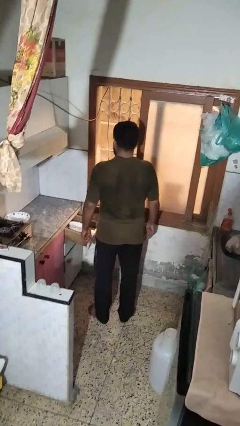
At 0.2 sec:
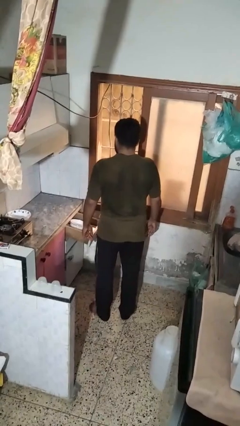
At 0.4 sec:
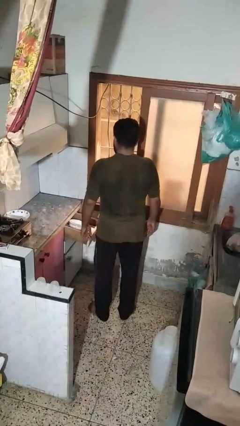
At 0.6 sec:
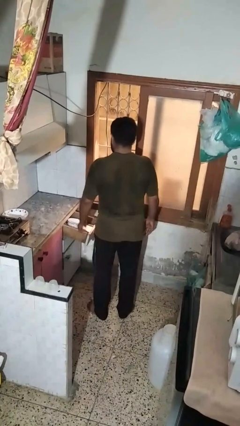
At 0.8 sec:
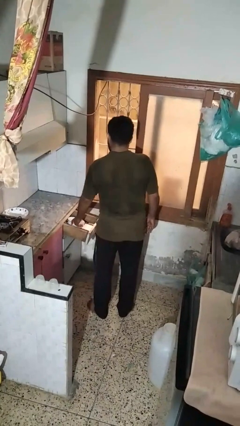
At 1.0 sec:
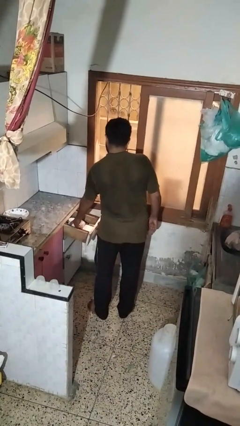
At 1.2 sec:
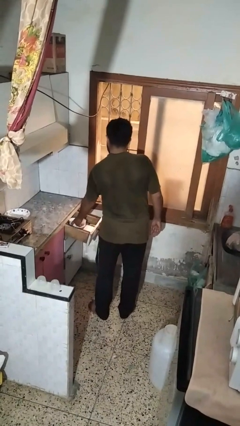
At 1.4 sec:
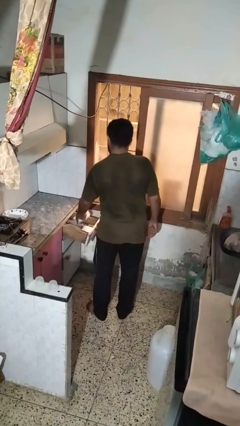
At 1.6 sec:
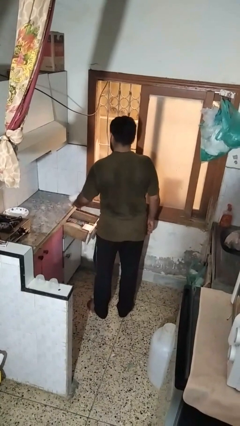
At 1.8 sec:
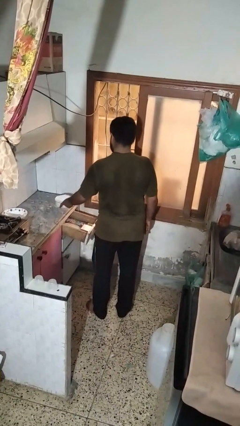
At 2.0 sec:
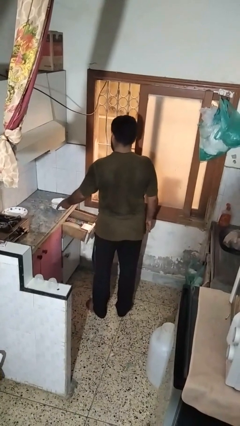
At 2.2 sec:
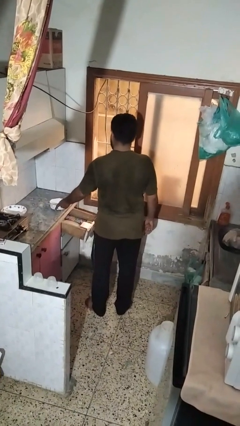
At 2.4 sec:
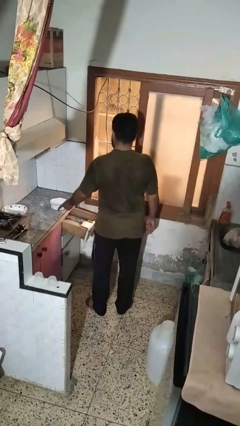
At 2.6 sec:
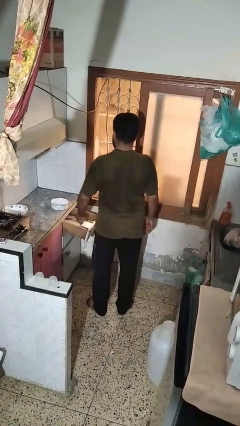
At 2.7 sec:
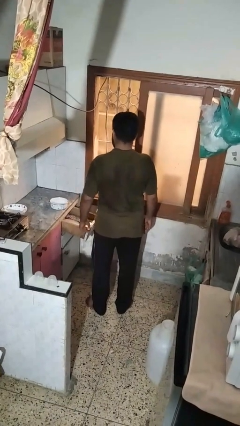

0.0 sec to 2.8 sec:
person takes object from kitchen drawer

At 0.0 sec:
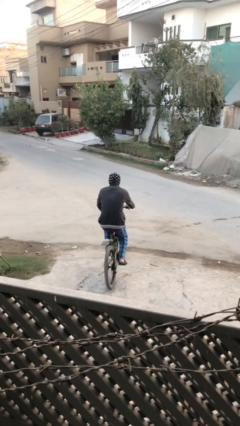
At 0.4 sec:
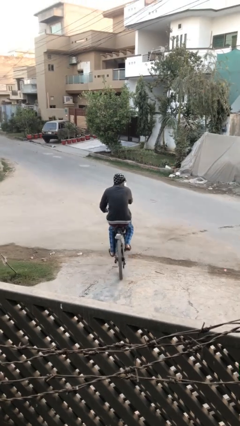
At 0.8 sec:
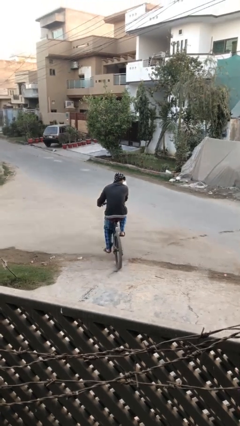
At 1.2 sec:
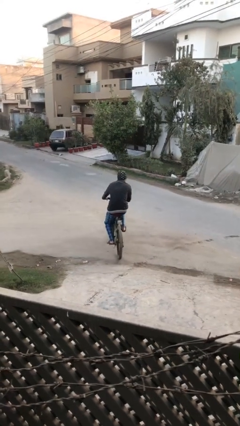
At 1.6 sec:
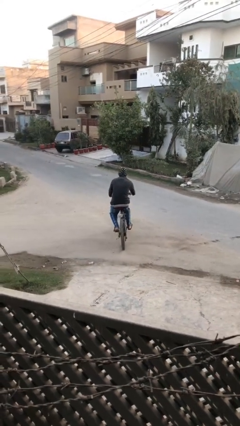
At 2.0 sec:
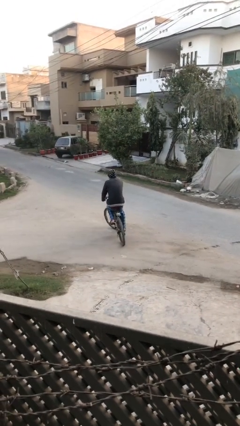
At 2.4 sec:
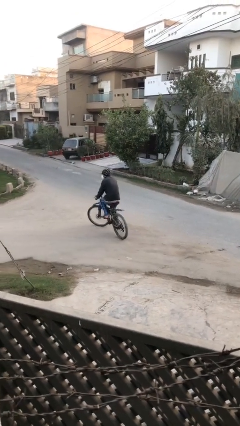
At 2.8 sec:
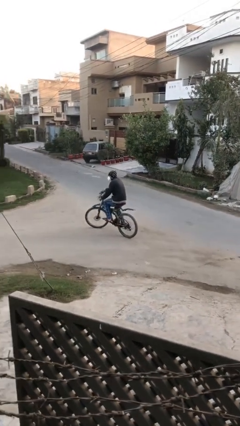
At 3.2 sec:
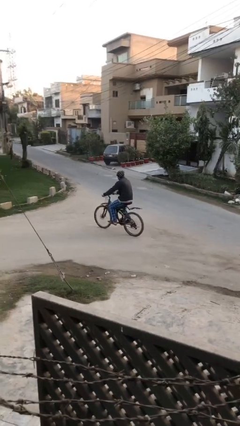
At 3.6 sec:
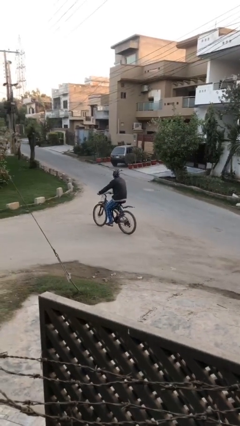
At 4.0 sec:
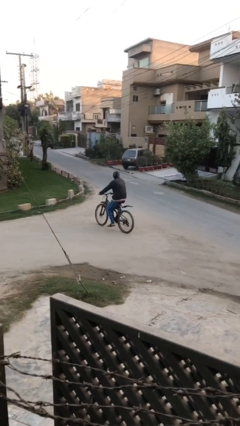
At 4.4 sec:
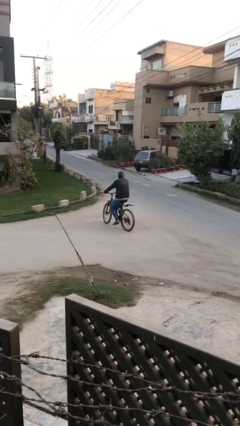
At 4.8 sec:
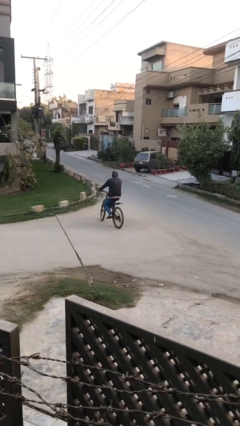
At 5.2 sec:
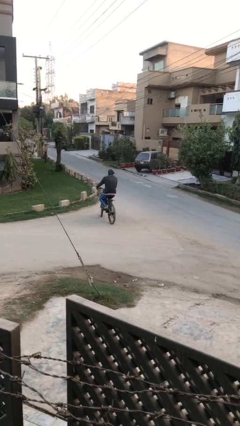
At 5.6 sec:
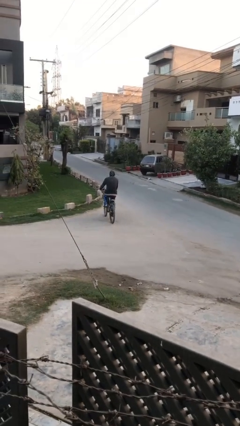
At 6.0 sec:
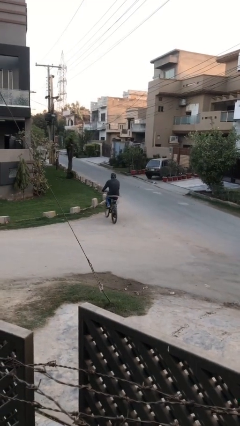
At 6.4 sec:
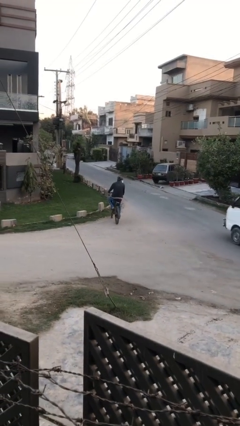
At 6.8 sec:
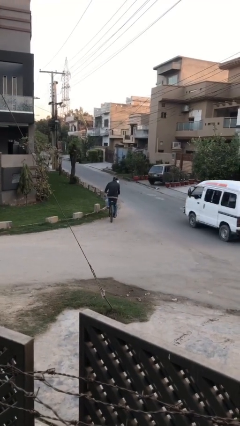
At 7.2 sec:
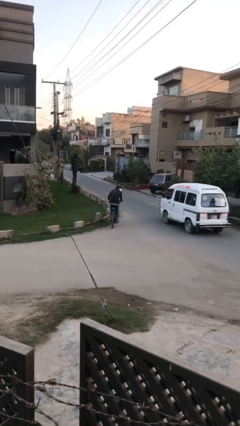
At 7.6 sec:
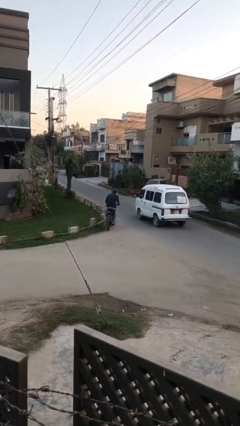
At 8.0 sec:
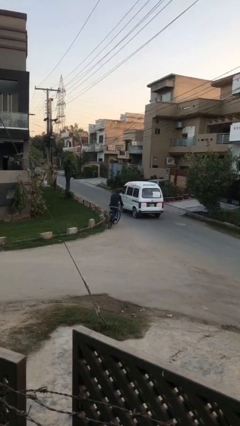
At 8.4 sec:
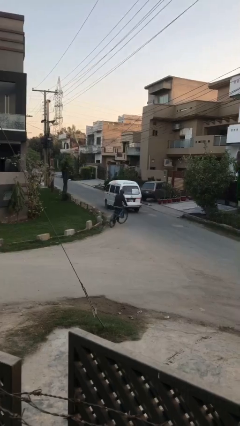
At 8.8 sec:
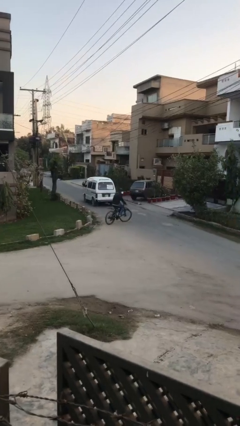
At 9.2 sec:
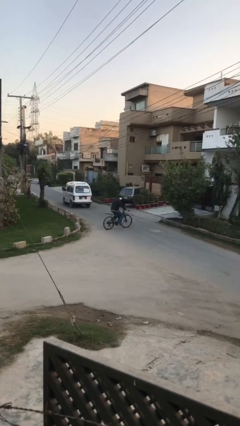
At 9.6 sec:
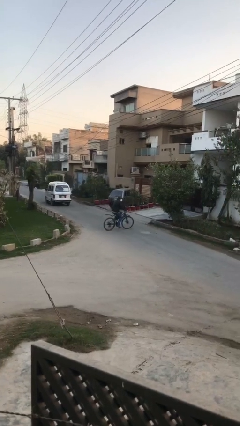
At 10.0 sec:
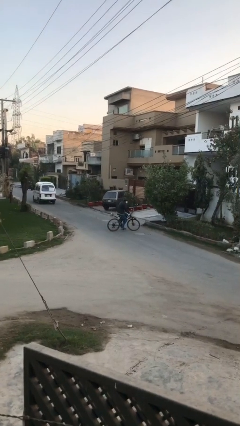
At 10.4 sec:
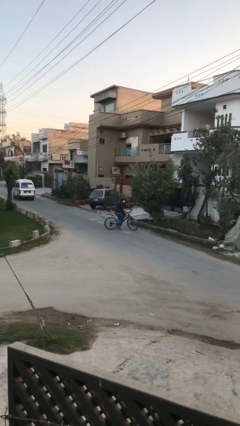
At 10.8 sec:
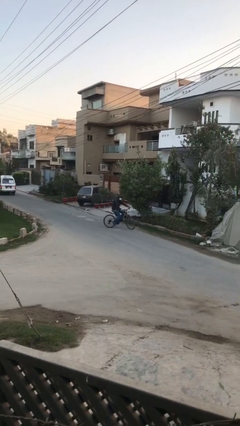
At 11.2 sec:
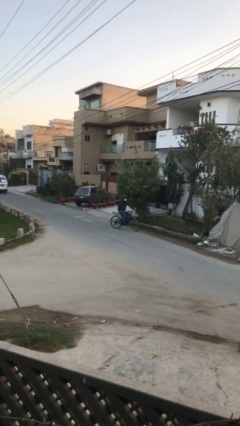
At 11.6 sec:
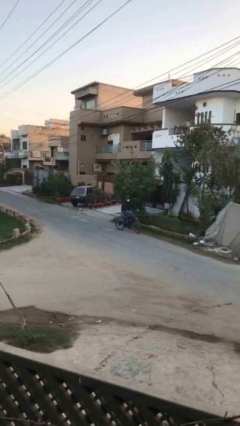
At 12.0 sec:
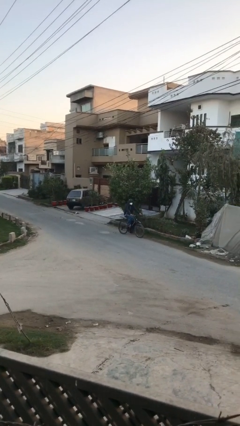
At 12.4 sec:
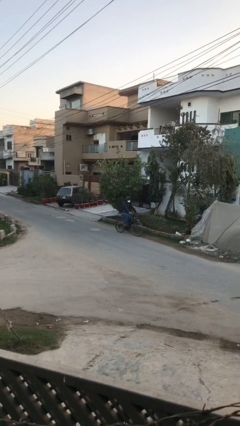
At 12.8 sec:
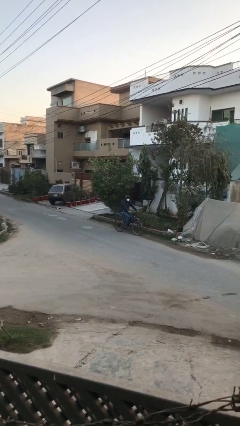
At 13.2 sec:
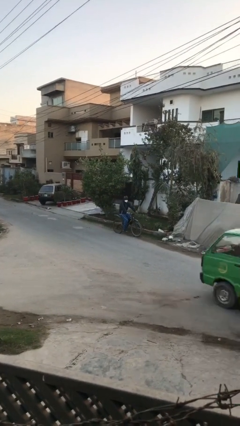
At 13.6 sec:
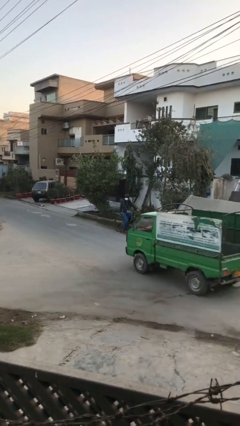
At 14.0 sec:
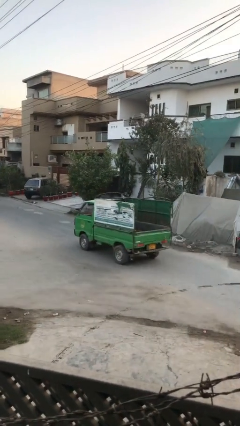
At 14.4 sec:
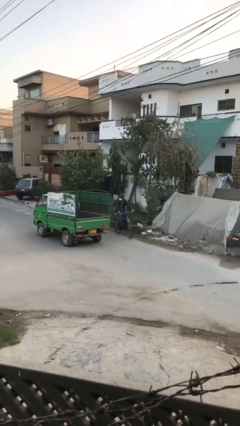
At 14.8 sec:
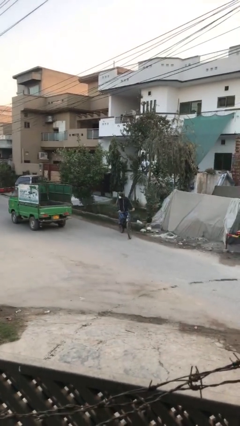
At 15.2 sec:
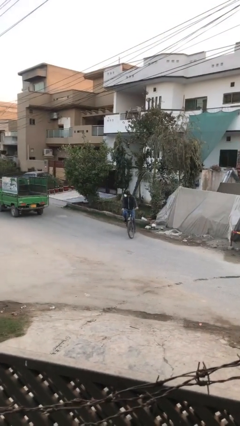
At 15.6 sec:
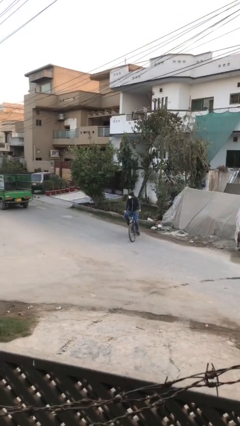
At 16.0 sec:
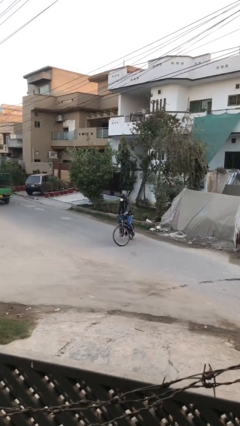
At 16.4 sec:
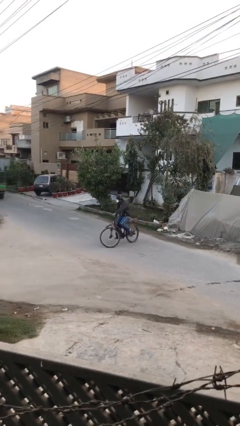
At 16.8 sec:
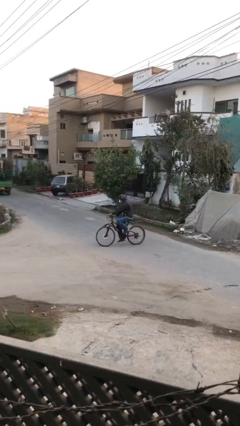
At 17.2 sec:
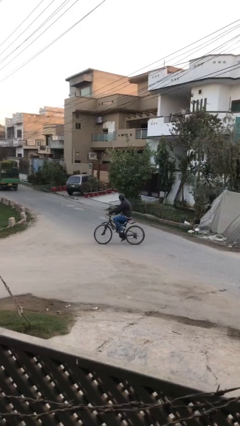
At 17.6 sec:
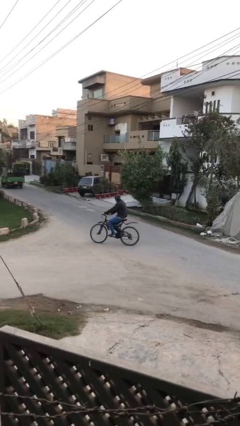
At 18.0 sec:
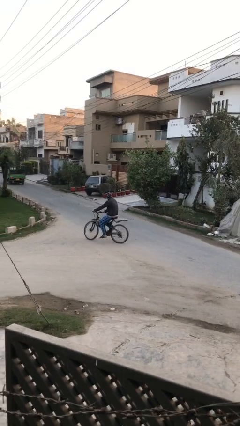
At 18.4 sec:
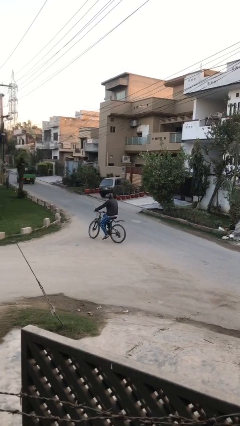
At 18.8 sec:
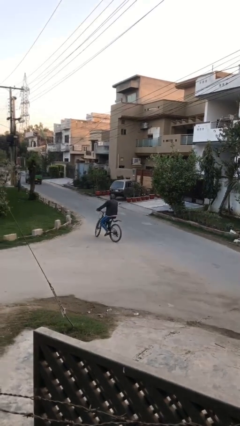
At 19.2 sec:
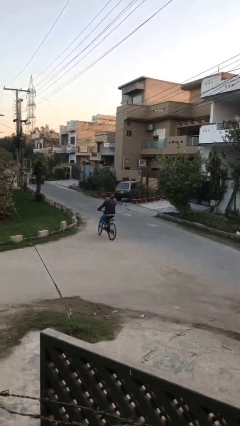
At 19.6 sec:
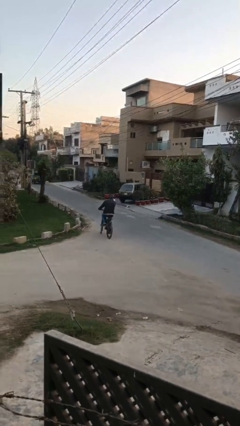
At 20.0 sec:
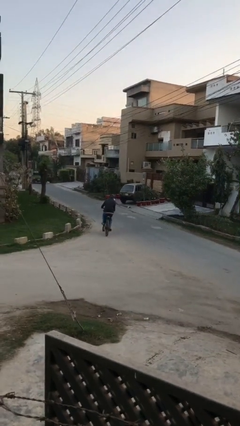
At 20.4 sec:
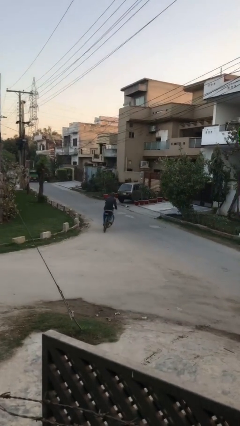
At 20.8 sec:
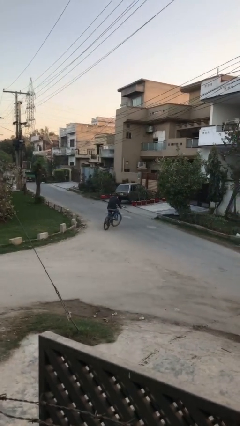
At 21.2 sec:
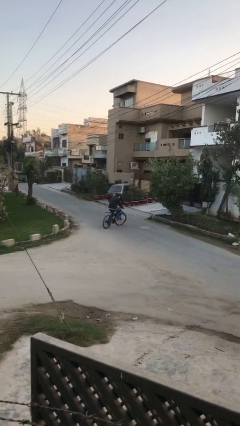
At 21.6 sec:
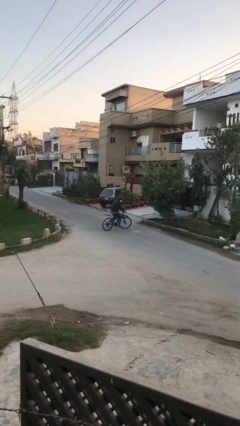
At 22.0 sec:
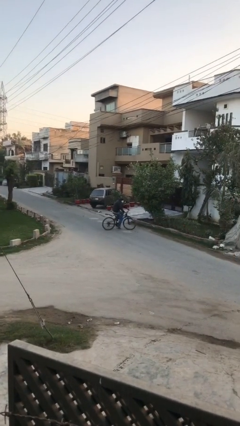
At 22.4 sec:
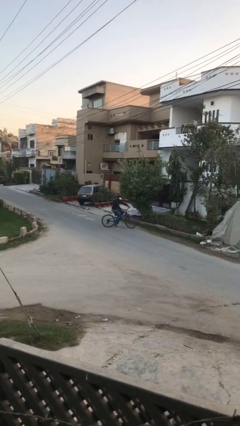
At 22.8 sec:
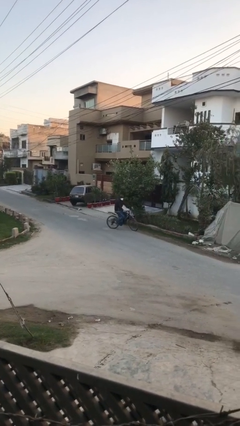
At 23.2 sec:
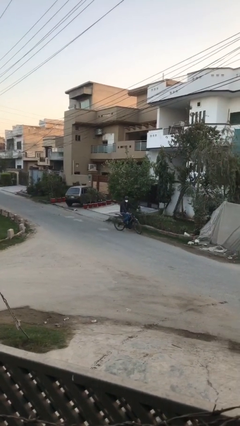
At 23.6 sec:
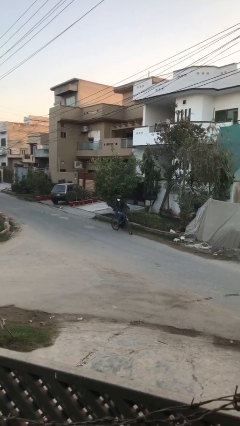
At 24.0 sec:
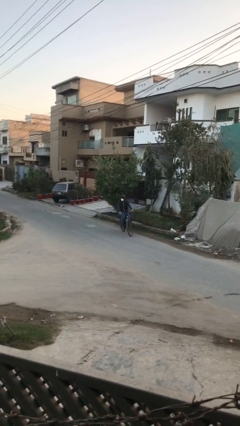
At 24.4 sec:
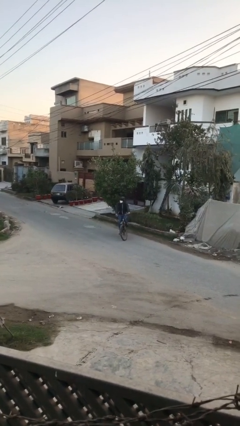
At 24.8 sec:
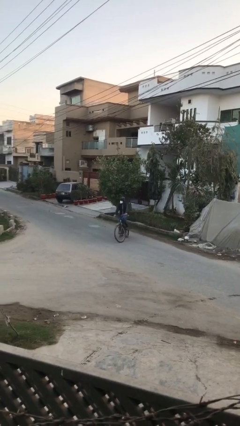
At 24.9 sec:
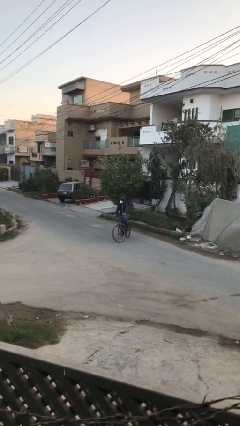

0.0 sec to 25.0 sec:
person rides bicycle

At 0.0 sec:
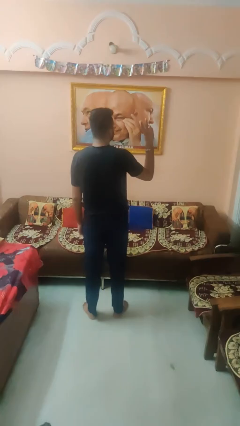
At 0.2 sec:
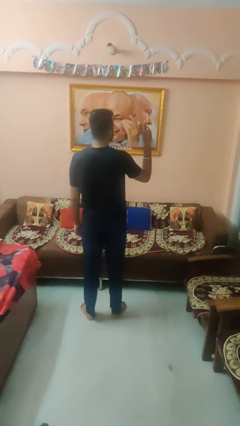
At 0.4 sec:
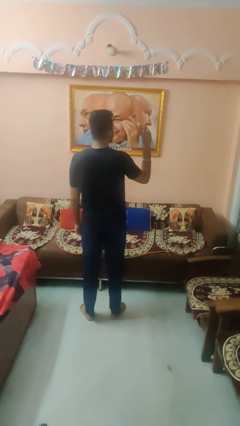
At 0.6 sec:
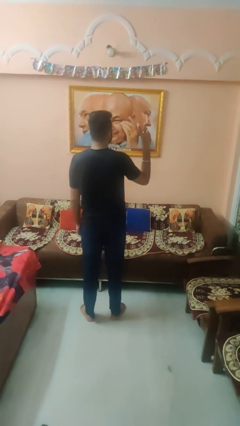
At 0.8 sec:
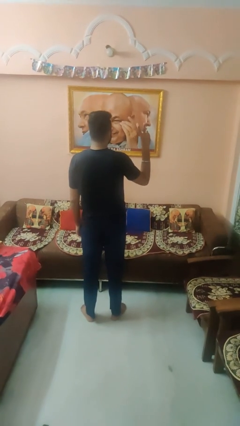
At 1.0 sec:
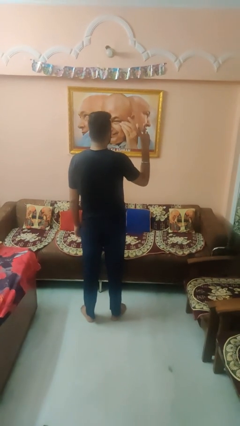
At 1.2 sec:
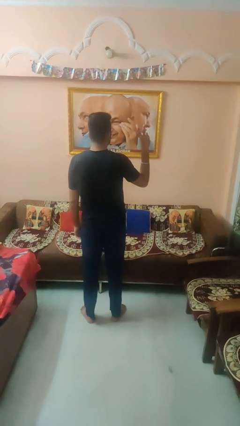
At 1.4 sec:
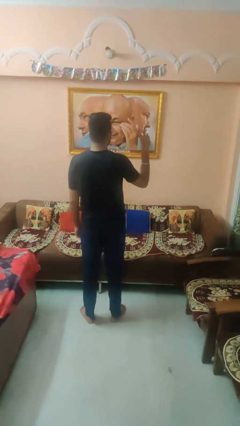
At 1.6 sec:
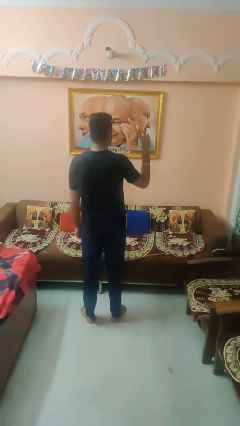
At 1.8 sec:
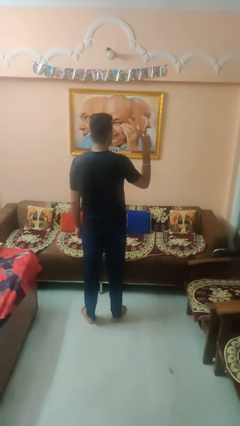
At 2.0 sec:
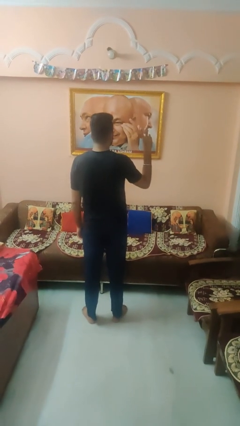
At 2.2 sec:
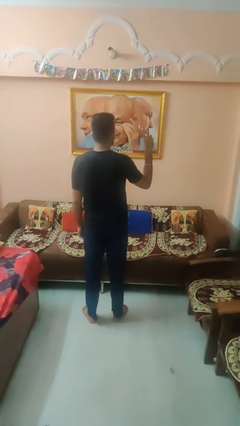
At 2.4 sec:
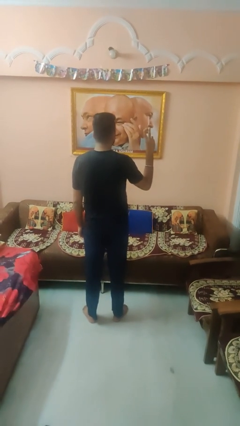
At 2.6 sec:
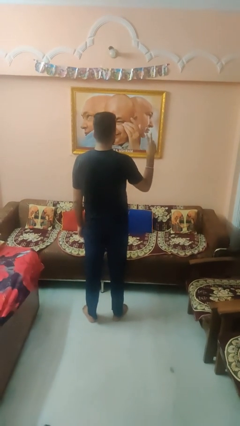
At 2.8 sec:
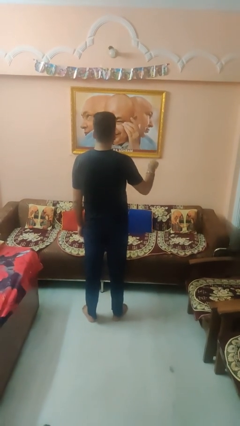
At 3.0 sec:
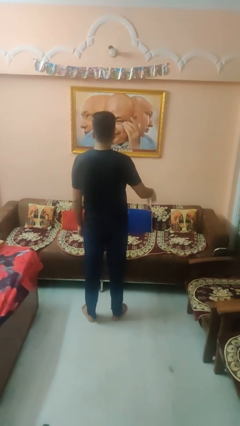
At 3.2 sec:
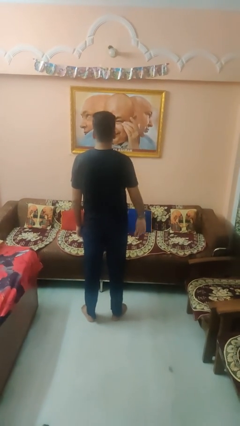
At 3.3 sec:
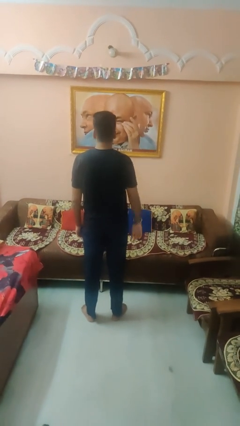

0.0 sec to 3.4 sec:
person gestures peace
